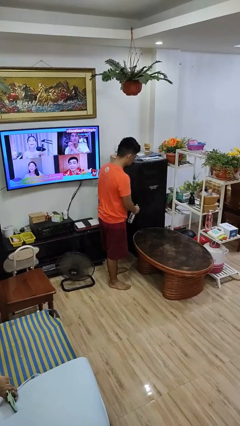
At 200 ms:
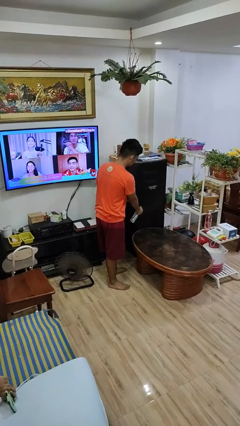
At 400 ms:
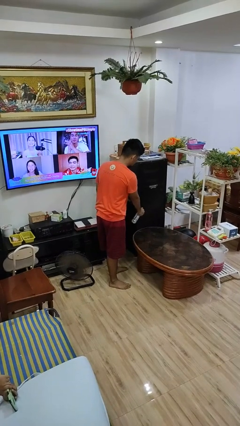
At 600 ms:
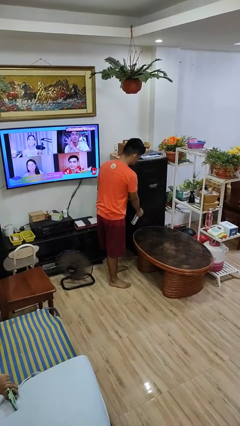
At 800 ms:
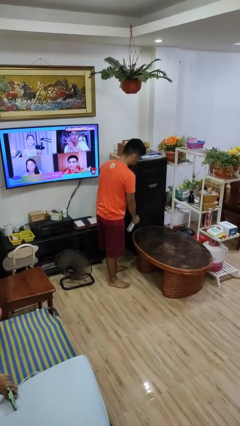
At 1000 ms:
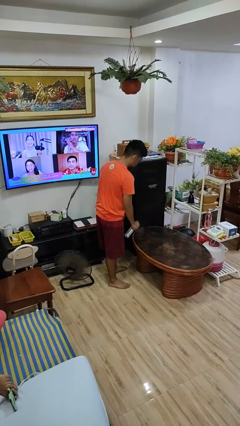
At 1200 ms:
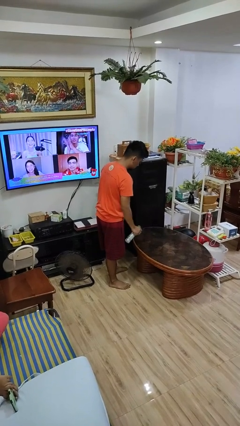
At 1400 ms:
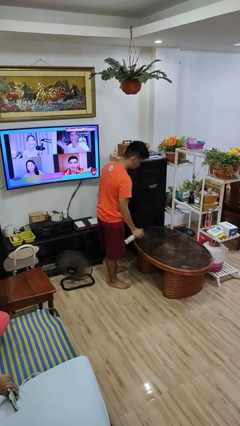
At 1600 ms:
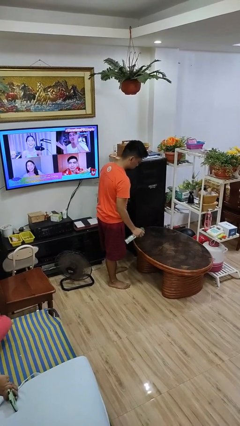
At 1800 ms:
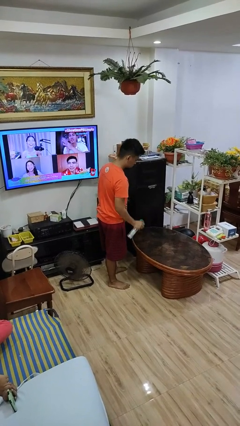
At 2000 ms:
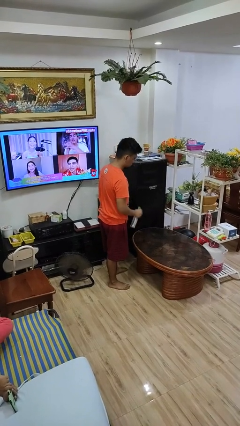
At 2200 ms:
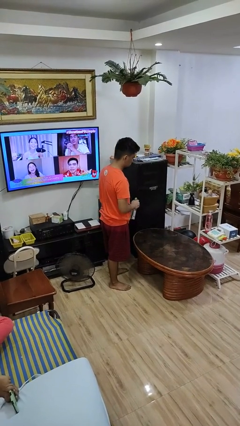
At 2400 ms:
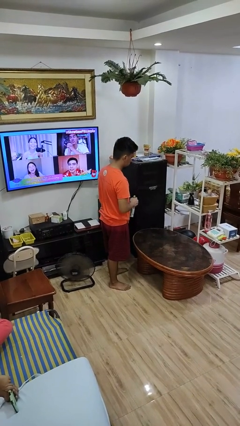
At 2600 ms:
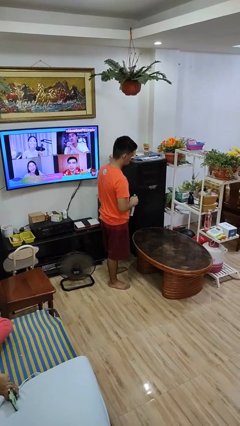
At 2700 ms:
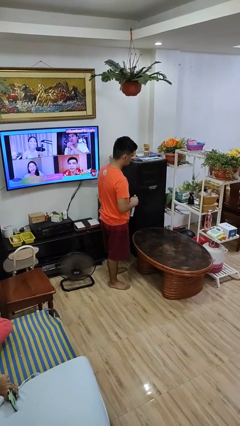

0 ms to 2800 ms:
person sprays from bottle

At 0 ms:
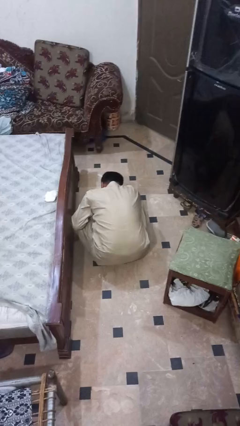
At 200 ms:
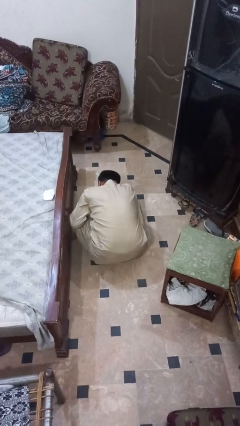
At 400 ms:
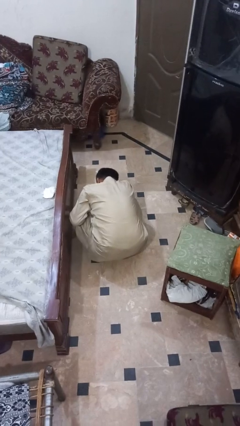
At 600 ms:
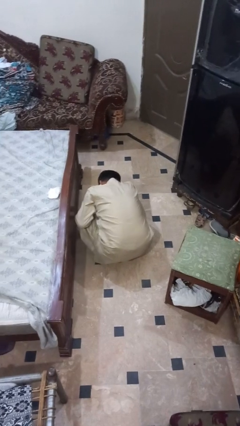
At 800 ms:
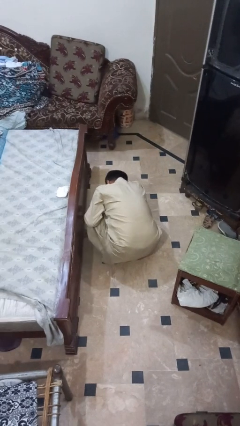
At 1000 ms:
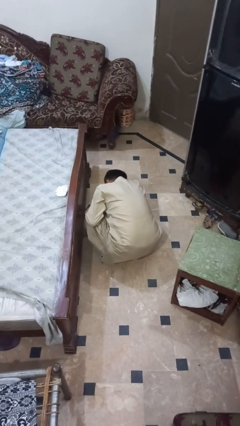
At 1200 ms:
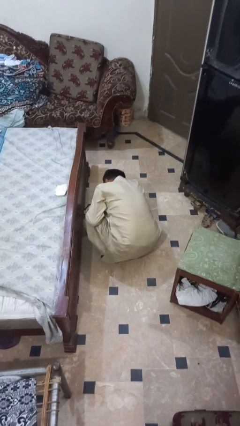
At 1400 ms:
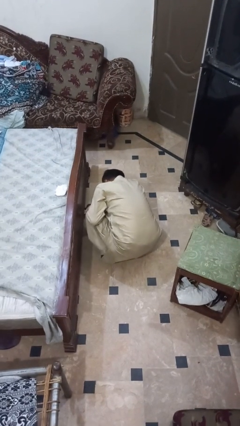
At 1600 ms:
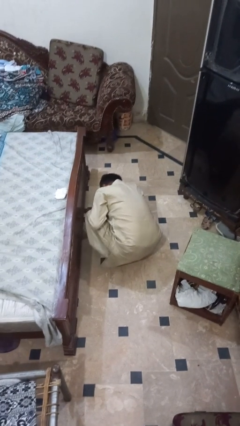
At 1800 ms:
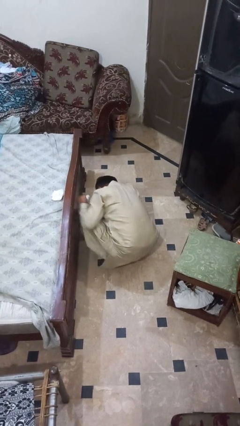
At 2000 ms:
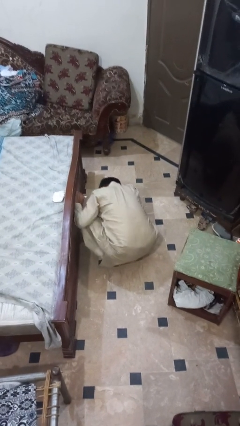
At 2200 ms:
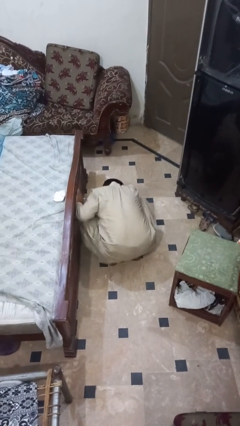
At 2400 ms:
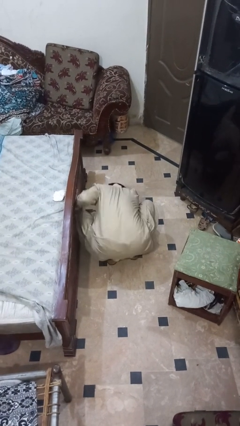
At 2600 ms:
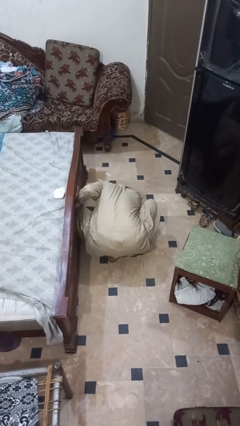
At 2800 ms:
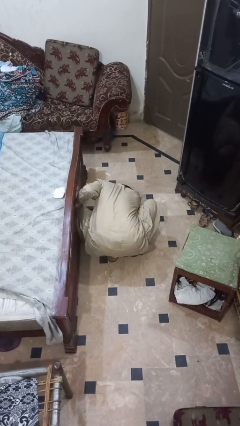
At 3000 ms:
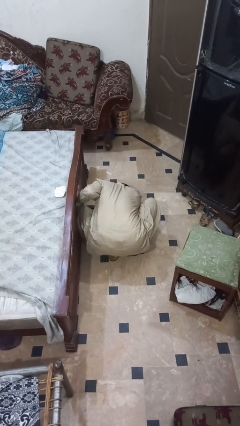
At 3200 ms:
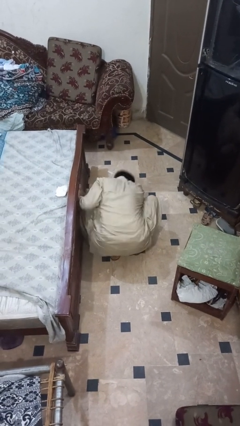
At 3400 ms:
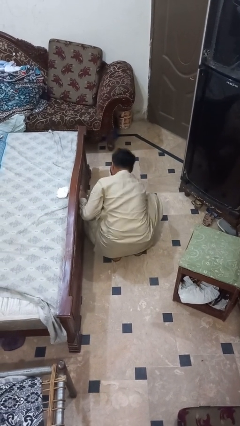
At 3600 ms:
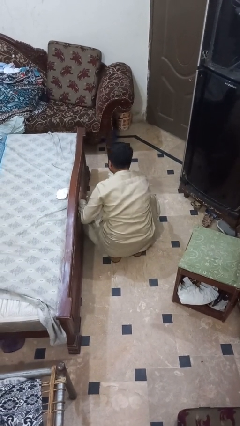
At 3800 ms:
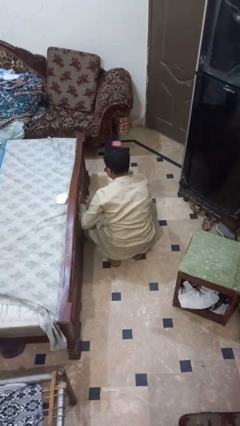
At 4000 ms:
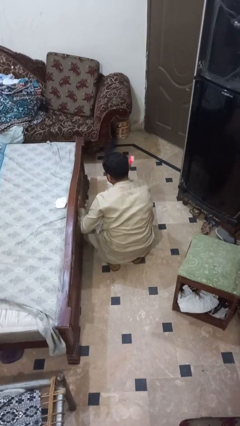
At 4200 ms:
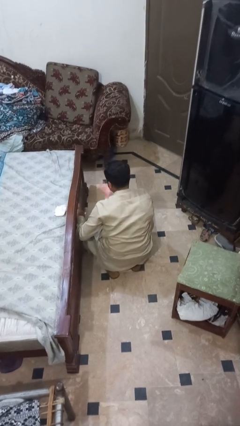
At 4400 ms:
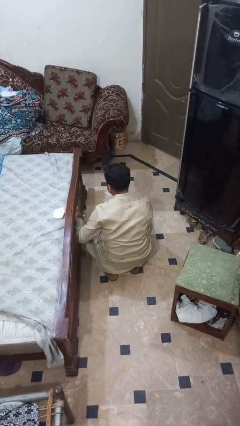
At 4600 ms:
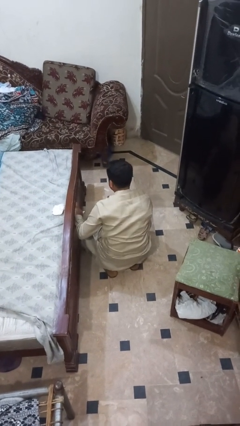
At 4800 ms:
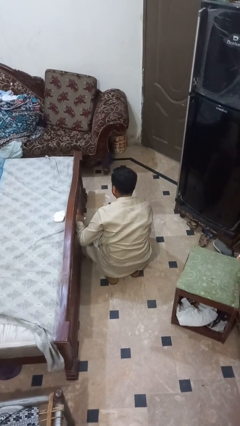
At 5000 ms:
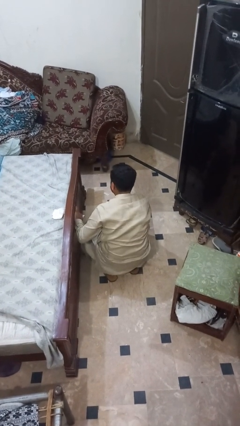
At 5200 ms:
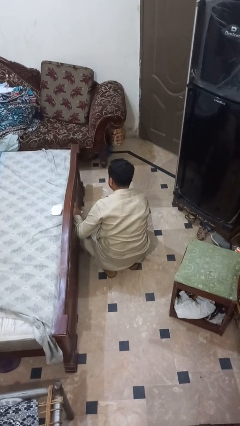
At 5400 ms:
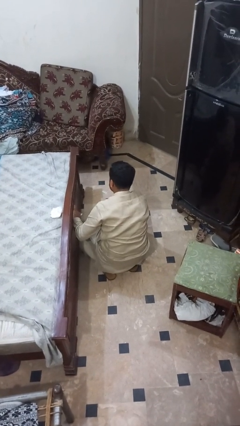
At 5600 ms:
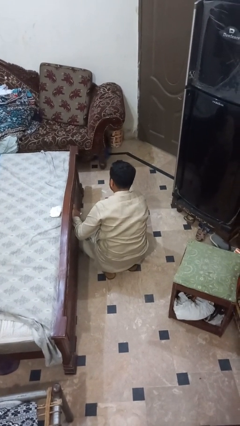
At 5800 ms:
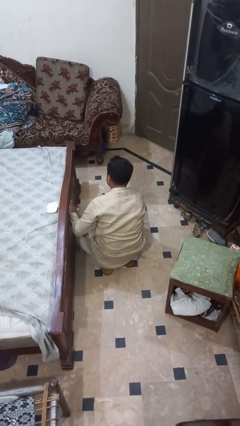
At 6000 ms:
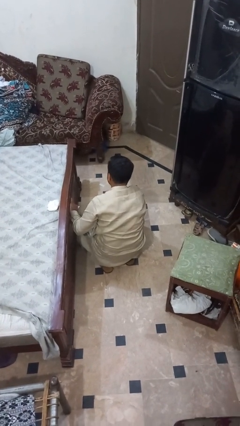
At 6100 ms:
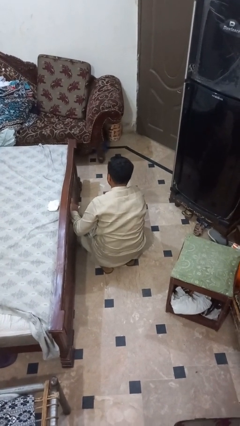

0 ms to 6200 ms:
person searches under bed

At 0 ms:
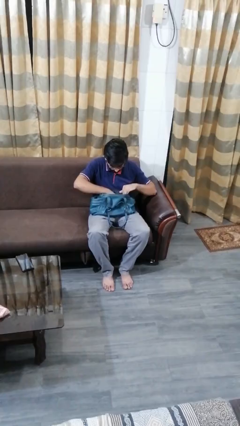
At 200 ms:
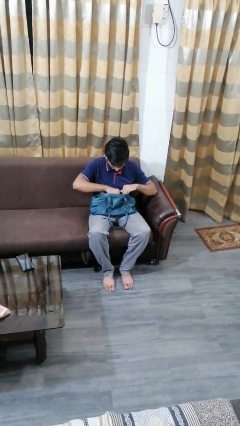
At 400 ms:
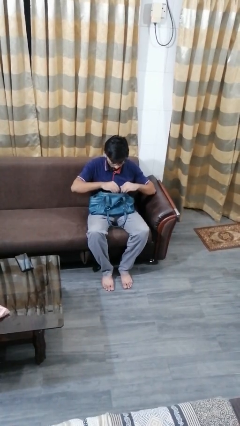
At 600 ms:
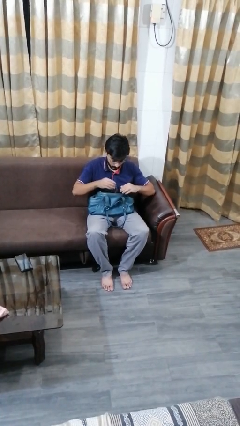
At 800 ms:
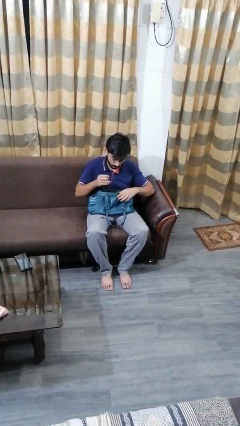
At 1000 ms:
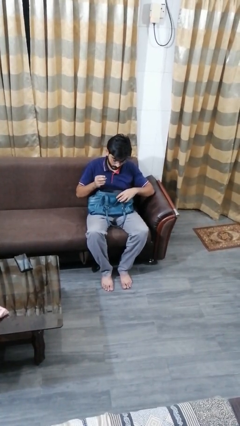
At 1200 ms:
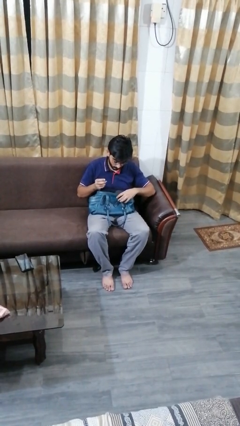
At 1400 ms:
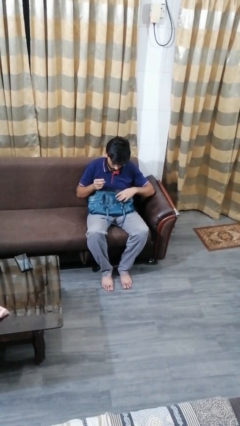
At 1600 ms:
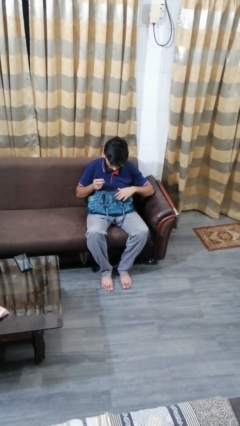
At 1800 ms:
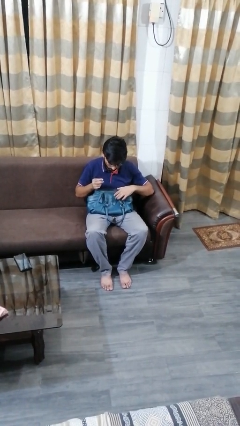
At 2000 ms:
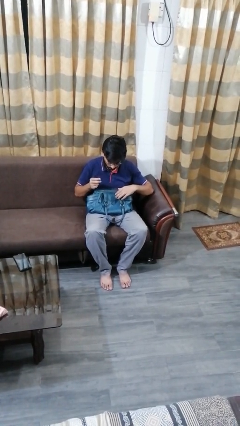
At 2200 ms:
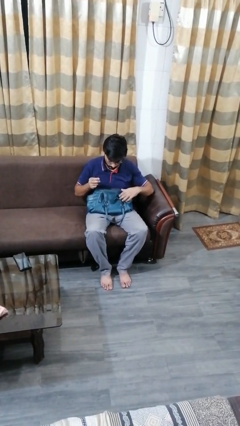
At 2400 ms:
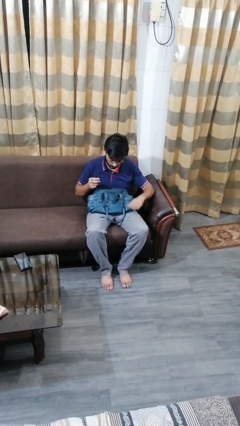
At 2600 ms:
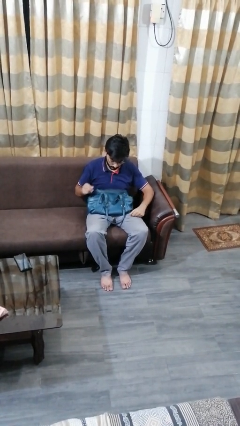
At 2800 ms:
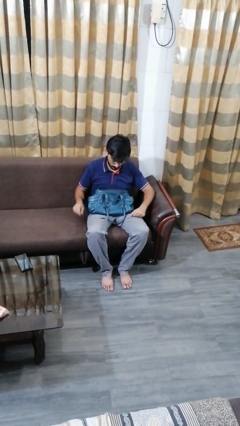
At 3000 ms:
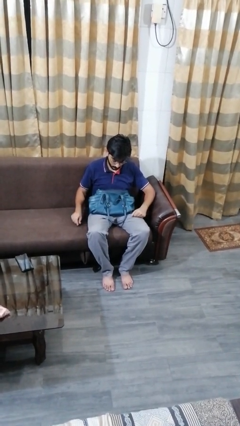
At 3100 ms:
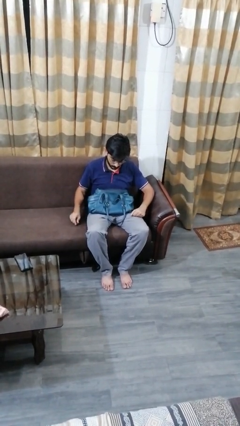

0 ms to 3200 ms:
person takes object from purse

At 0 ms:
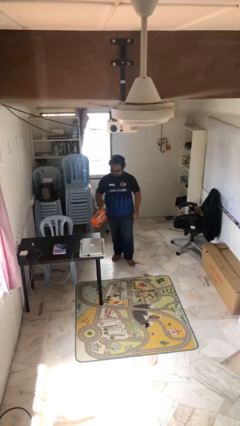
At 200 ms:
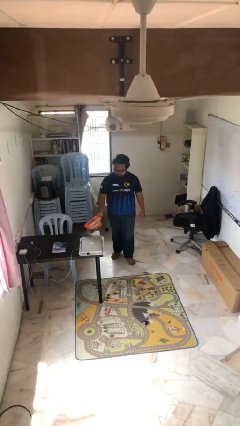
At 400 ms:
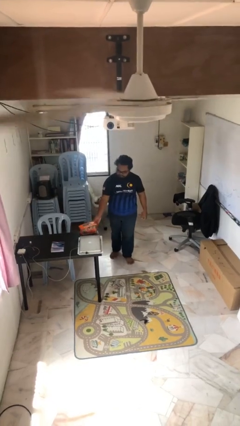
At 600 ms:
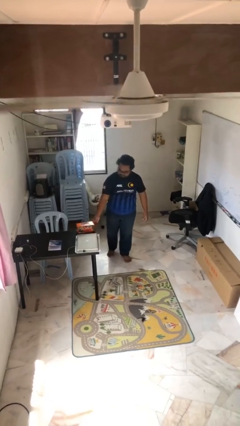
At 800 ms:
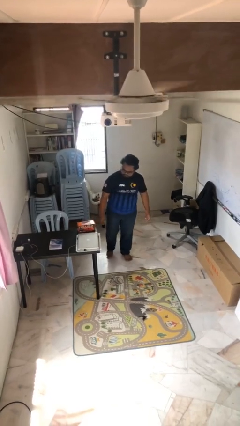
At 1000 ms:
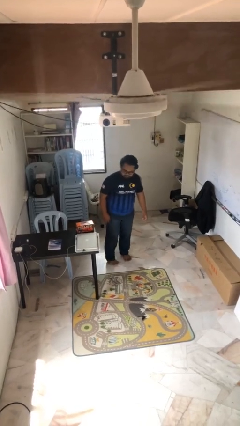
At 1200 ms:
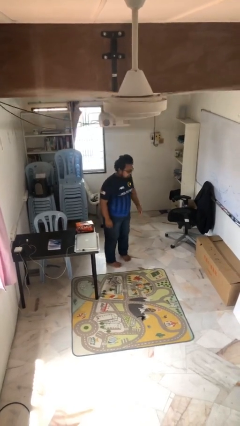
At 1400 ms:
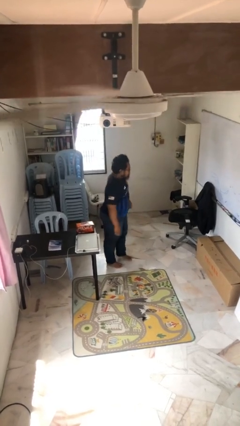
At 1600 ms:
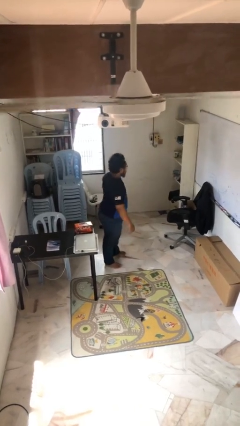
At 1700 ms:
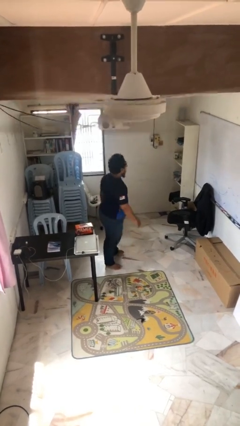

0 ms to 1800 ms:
person puts down object on table

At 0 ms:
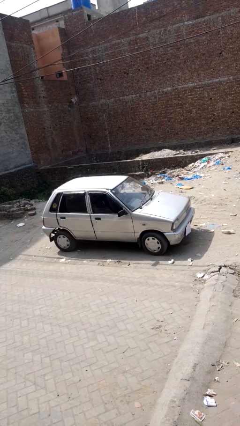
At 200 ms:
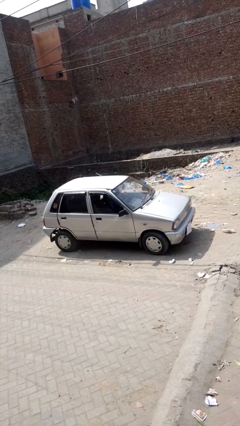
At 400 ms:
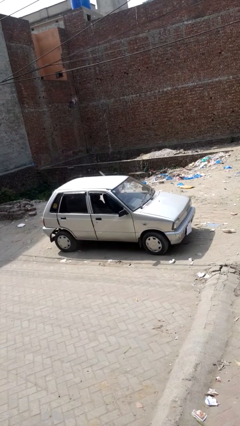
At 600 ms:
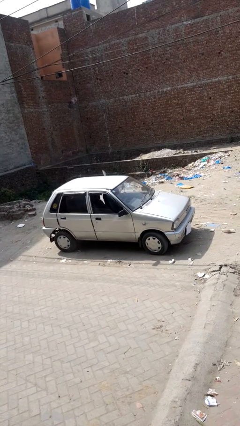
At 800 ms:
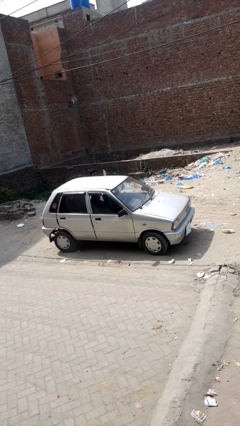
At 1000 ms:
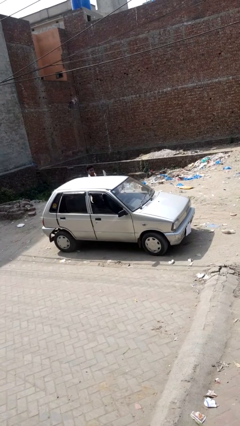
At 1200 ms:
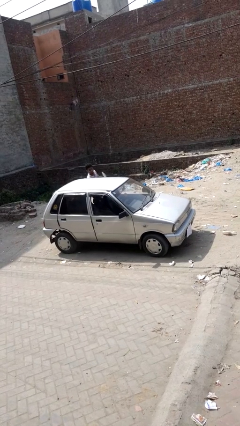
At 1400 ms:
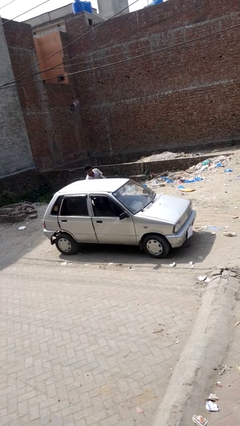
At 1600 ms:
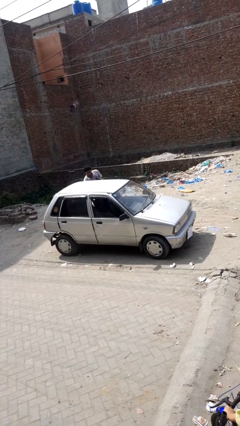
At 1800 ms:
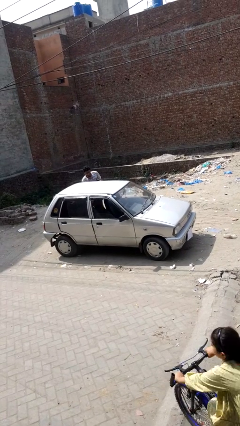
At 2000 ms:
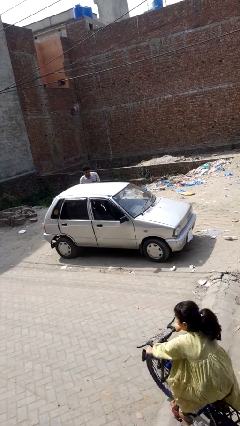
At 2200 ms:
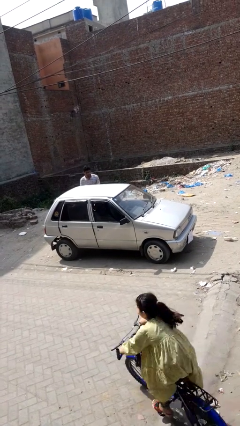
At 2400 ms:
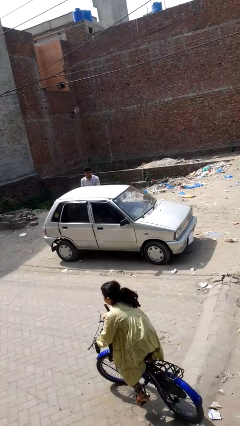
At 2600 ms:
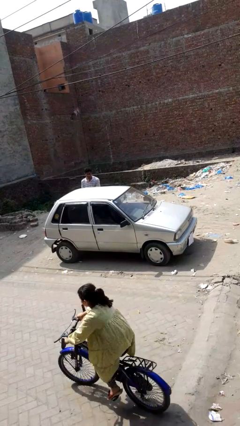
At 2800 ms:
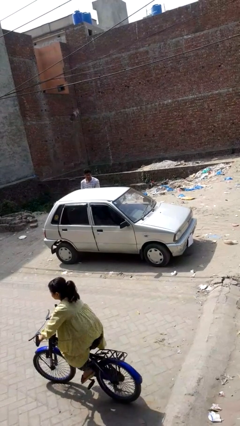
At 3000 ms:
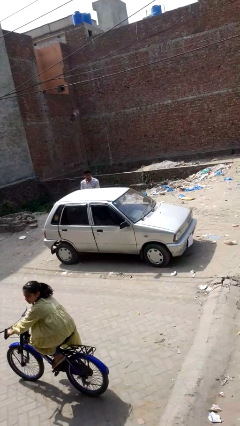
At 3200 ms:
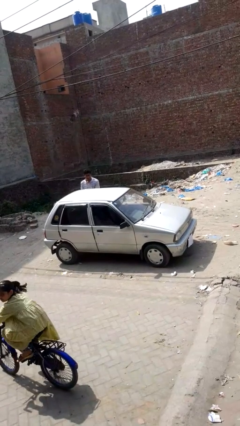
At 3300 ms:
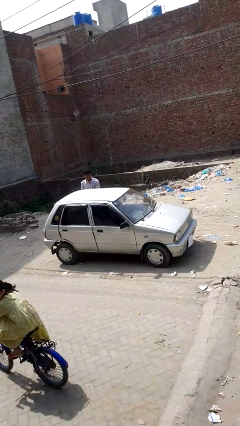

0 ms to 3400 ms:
car drops off person

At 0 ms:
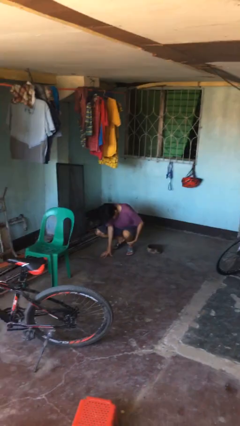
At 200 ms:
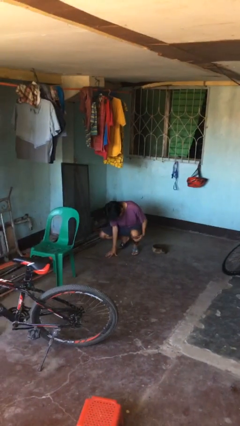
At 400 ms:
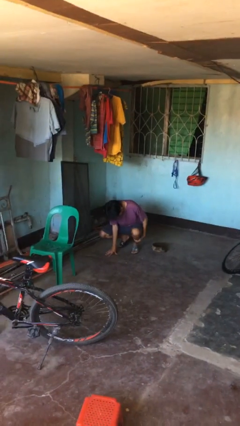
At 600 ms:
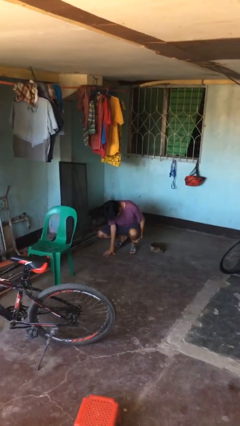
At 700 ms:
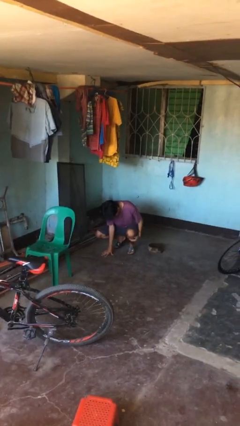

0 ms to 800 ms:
person lies down on floor
